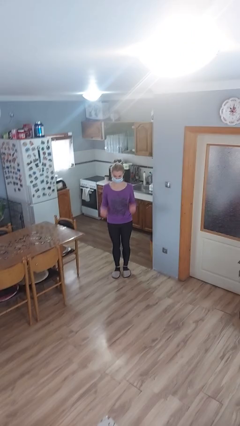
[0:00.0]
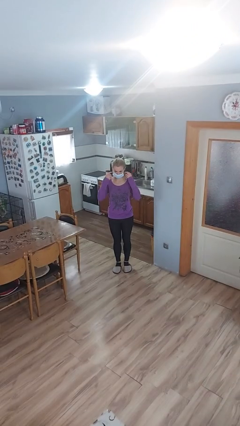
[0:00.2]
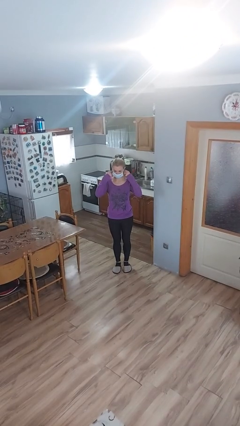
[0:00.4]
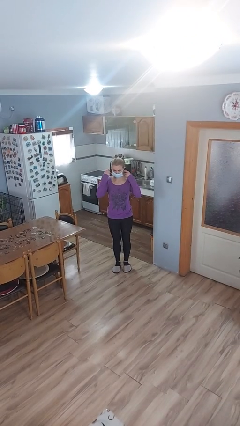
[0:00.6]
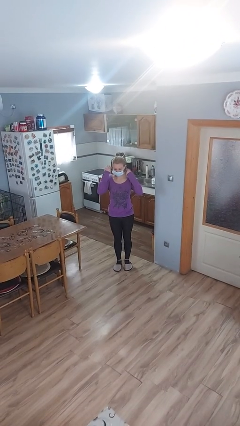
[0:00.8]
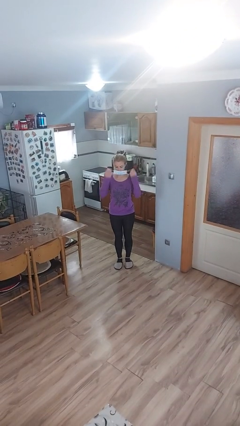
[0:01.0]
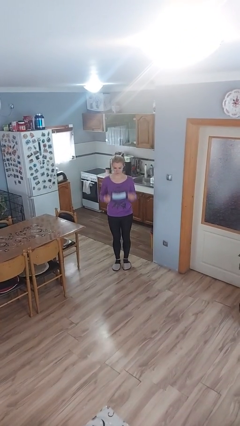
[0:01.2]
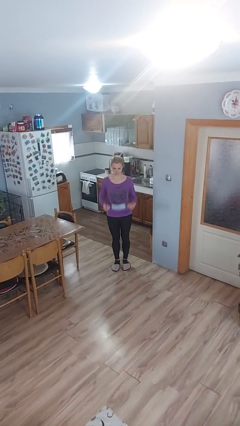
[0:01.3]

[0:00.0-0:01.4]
person takes off facemask

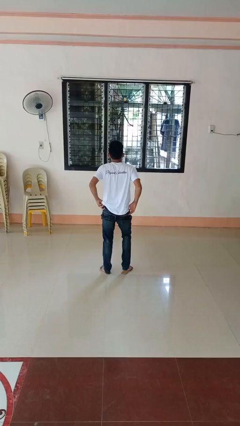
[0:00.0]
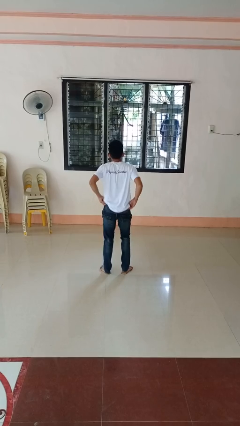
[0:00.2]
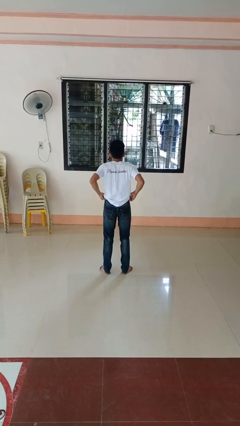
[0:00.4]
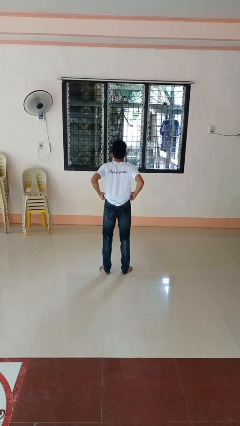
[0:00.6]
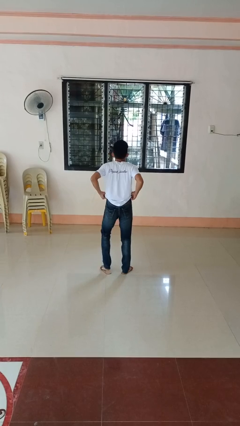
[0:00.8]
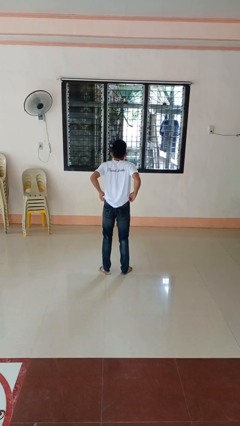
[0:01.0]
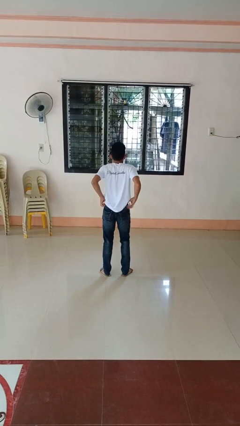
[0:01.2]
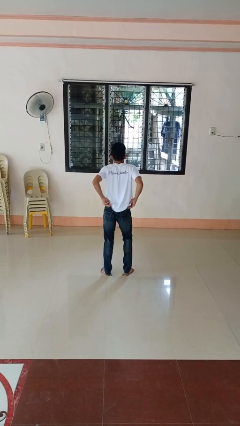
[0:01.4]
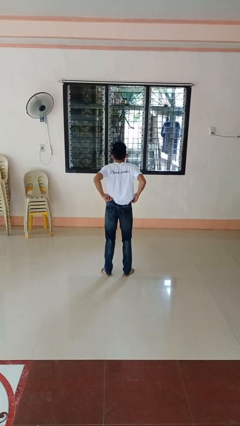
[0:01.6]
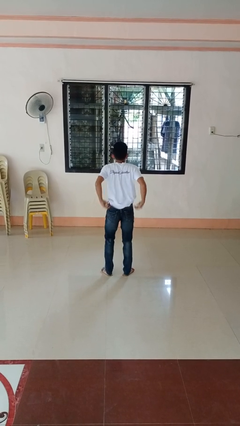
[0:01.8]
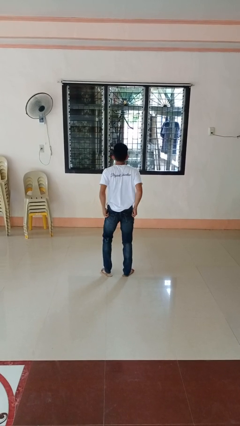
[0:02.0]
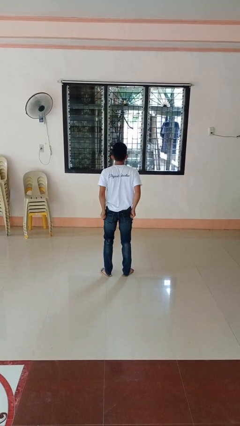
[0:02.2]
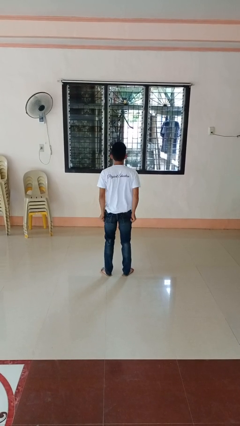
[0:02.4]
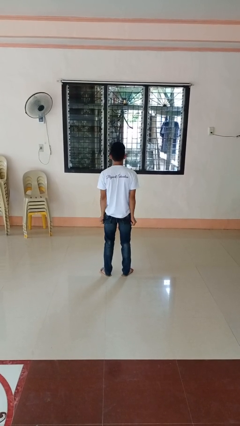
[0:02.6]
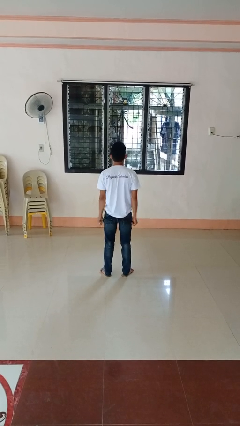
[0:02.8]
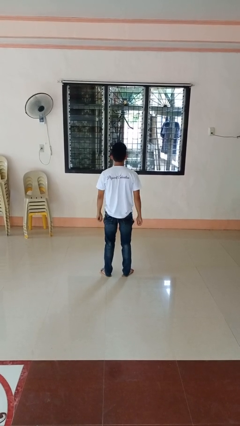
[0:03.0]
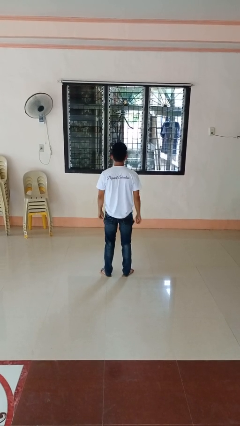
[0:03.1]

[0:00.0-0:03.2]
person hikes up pants

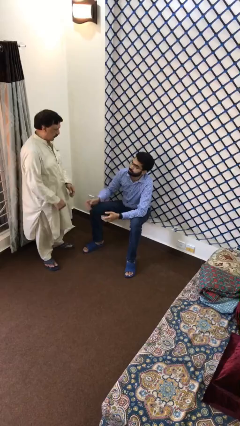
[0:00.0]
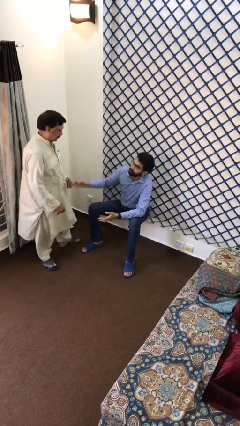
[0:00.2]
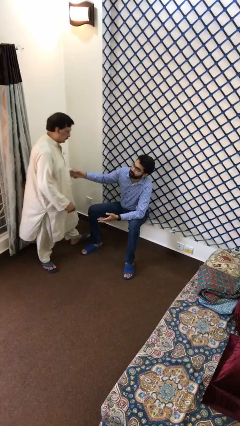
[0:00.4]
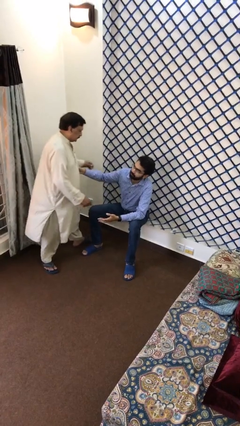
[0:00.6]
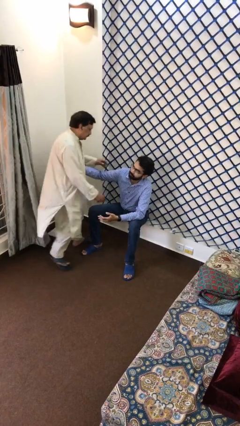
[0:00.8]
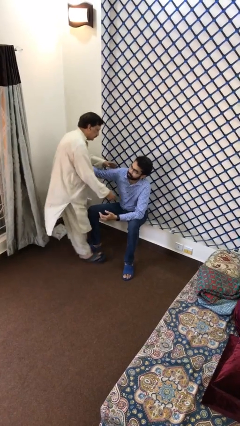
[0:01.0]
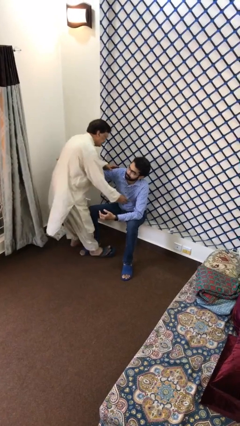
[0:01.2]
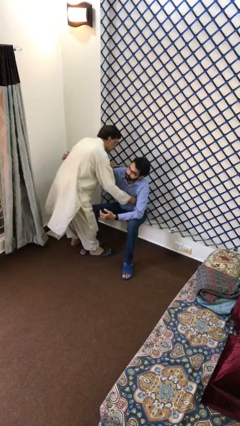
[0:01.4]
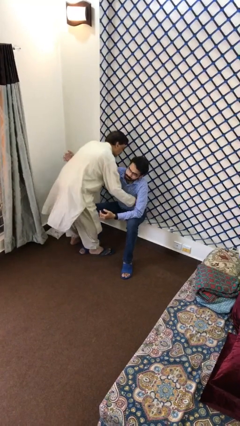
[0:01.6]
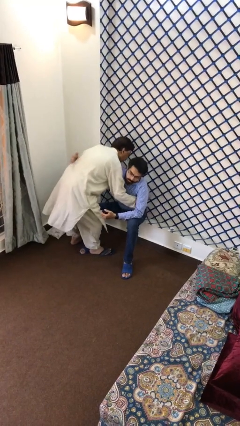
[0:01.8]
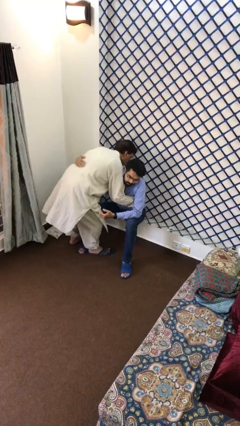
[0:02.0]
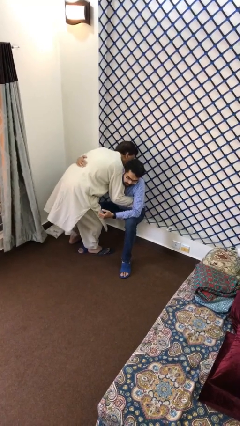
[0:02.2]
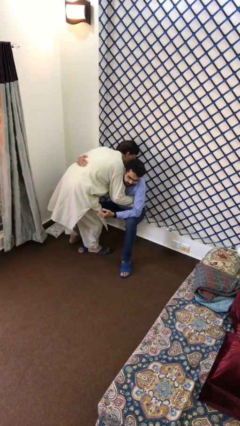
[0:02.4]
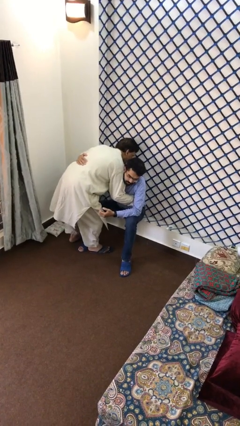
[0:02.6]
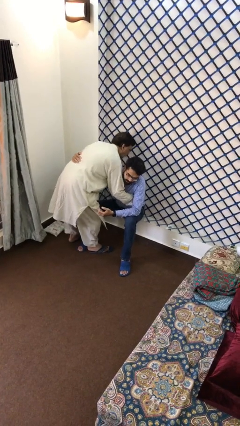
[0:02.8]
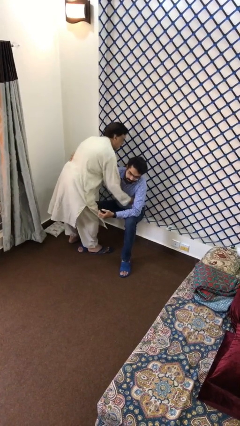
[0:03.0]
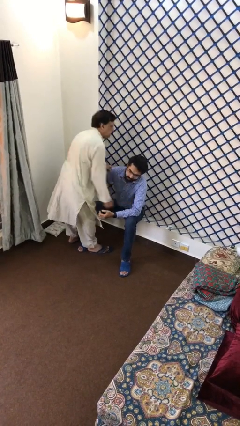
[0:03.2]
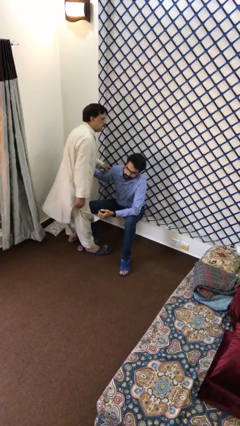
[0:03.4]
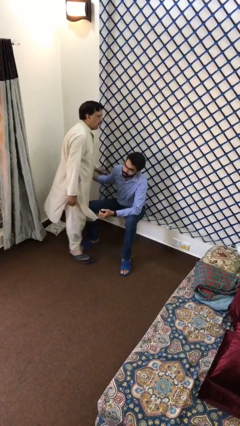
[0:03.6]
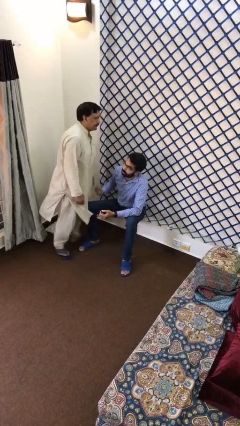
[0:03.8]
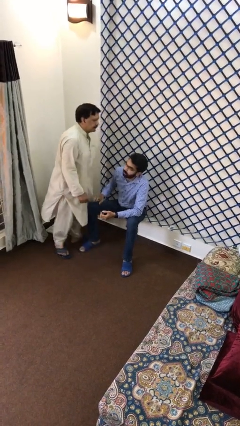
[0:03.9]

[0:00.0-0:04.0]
person embraces person

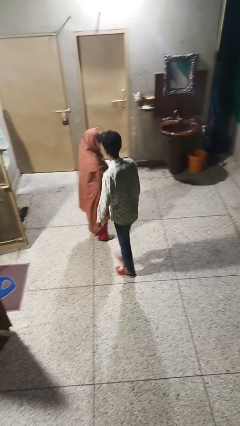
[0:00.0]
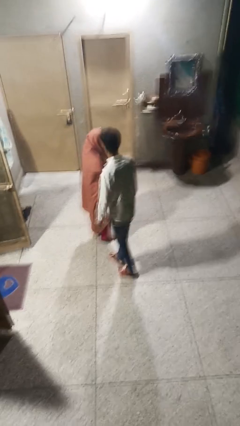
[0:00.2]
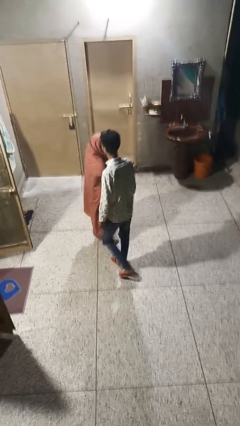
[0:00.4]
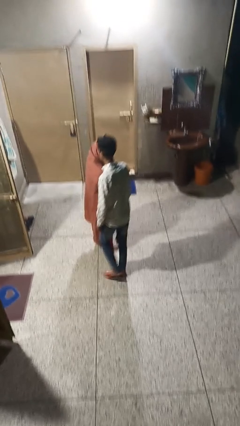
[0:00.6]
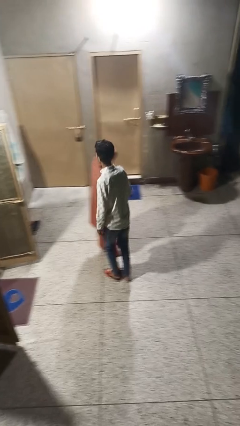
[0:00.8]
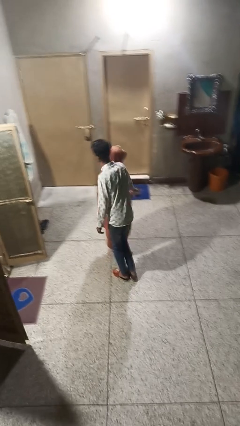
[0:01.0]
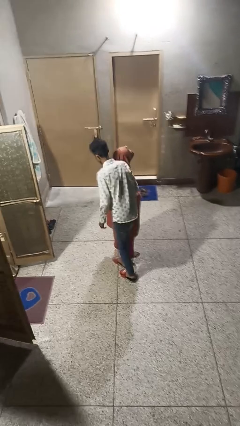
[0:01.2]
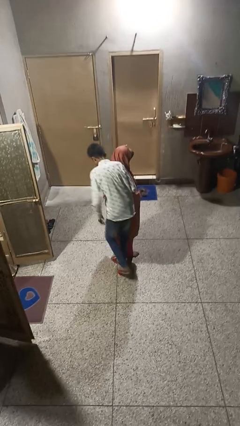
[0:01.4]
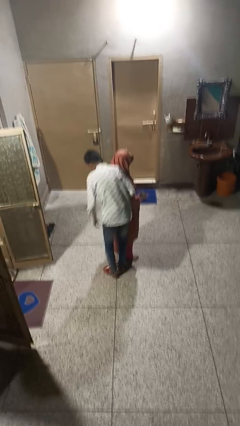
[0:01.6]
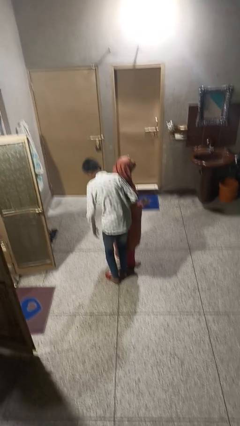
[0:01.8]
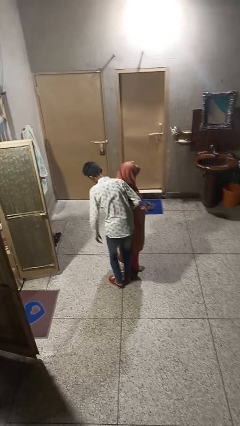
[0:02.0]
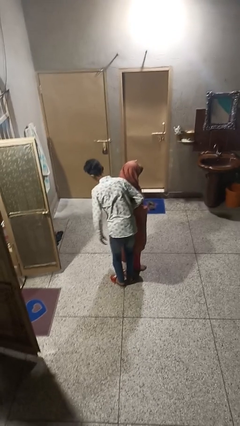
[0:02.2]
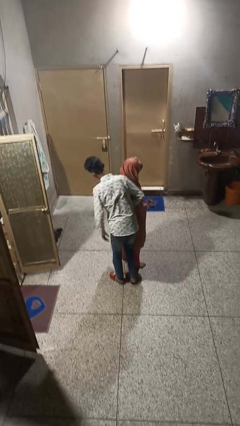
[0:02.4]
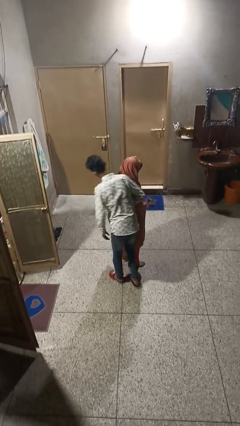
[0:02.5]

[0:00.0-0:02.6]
person bumps into person

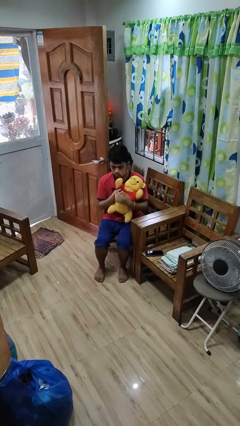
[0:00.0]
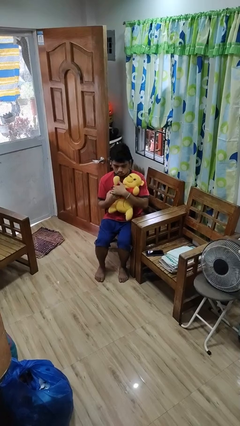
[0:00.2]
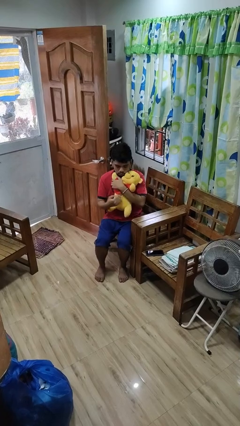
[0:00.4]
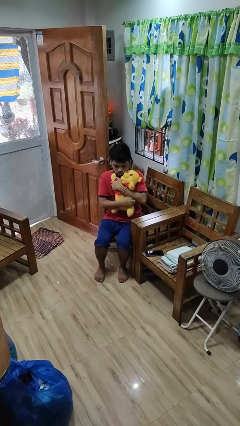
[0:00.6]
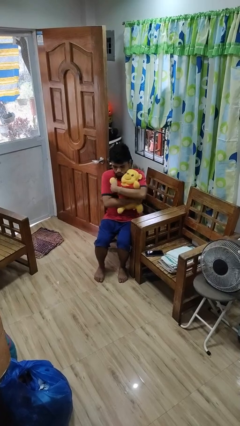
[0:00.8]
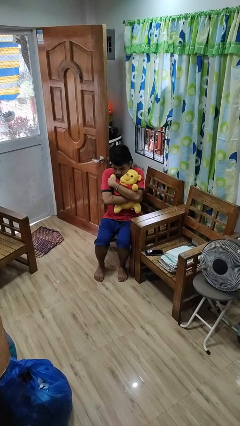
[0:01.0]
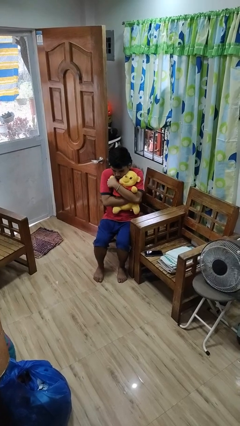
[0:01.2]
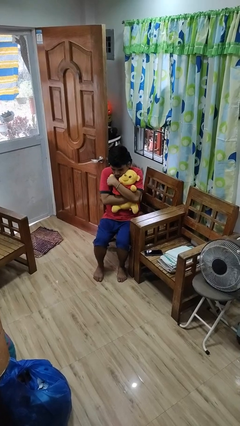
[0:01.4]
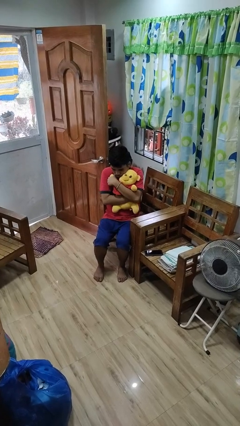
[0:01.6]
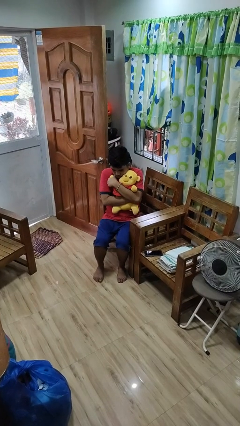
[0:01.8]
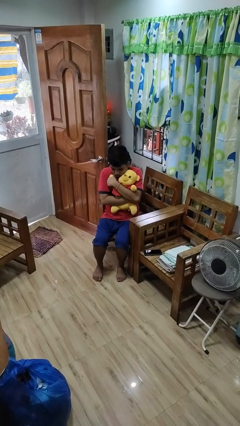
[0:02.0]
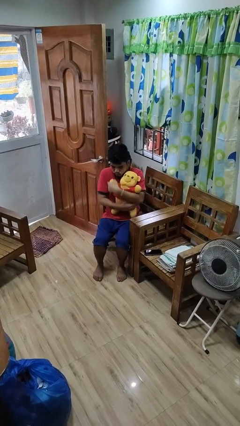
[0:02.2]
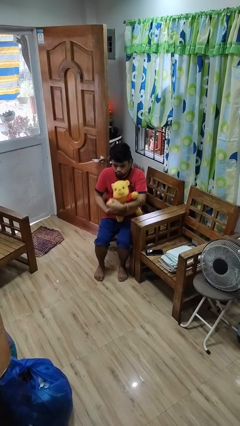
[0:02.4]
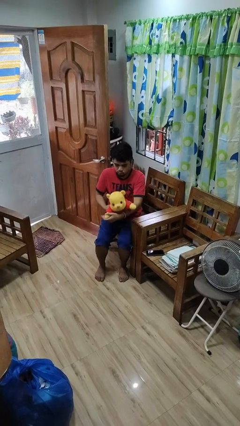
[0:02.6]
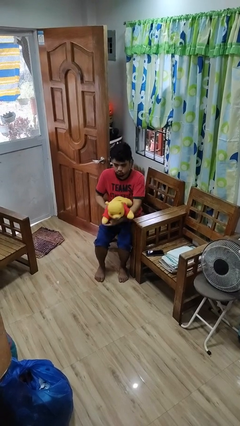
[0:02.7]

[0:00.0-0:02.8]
person hugs stuffed animal

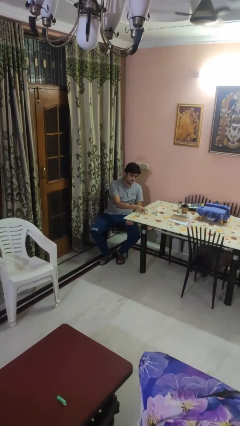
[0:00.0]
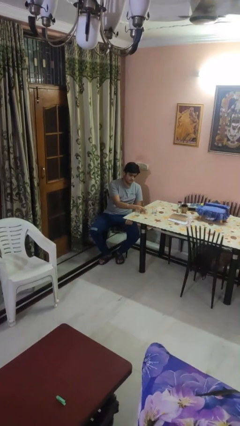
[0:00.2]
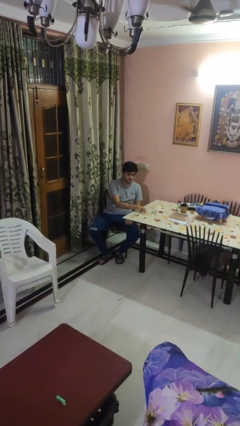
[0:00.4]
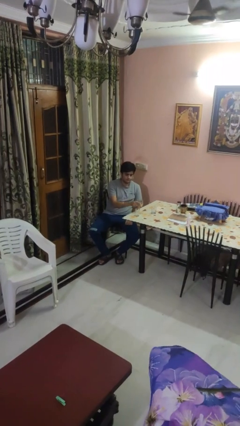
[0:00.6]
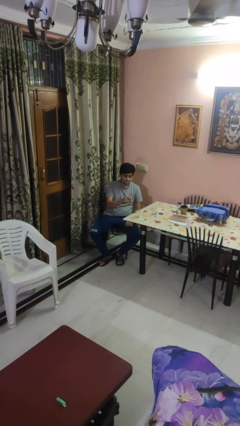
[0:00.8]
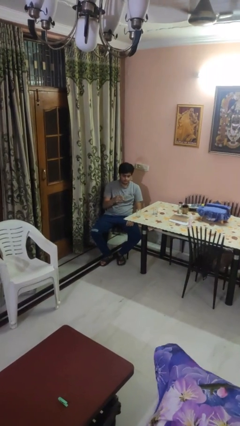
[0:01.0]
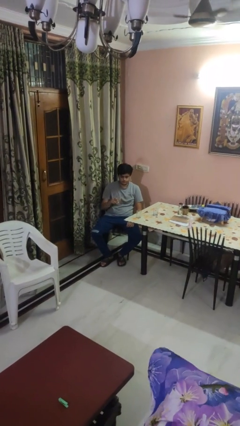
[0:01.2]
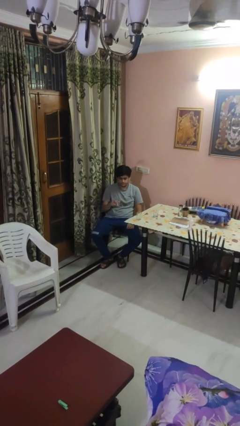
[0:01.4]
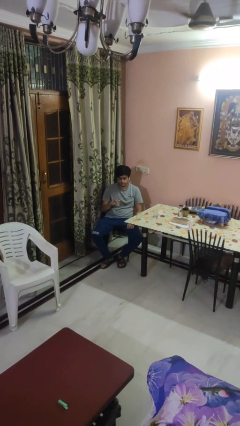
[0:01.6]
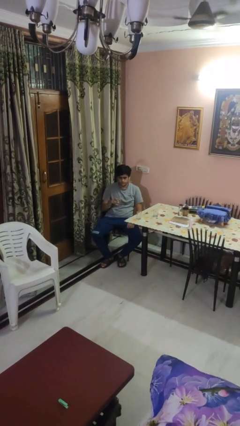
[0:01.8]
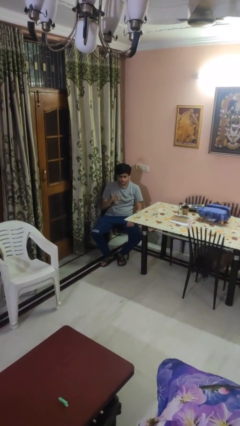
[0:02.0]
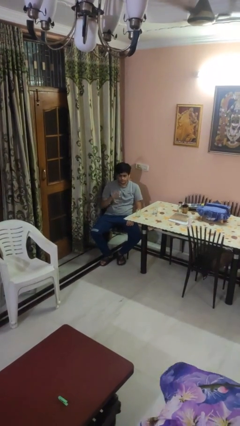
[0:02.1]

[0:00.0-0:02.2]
person picks up object from table

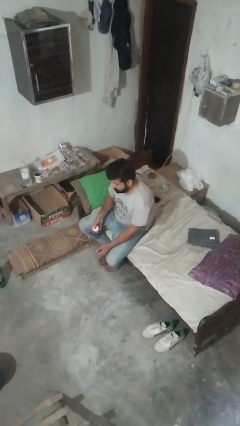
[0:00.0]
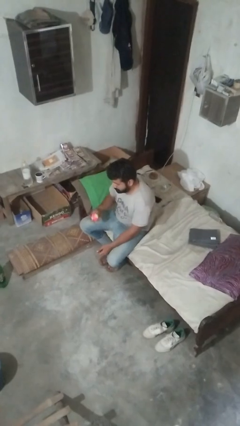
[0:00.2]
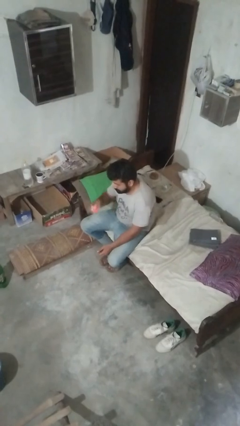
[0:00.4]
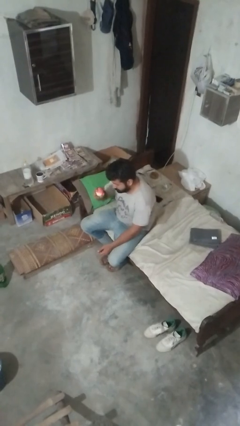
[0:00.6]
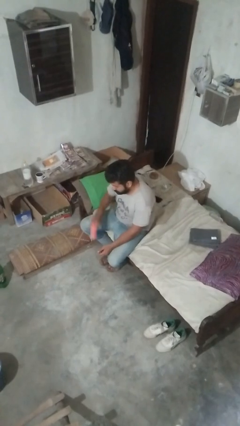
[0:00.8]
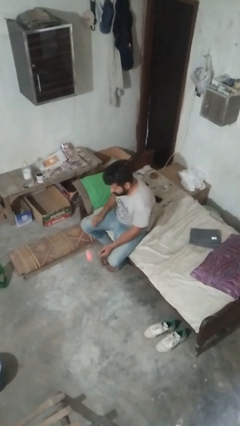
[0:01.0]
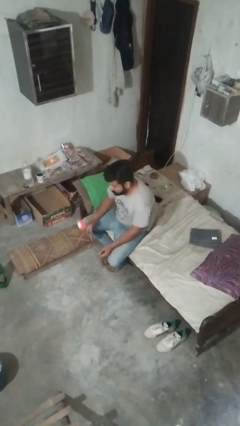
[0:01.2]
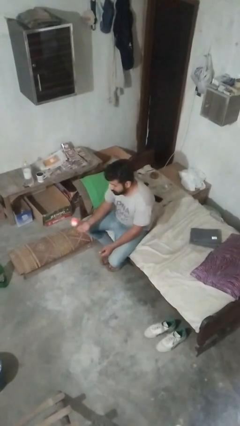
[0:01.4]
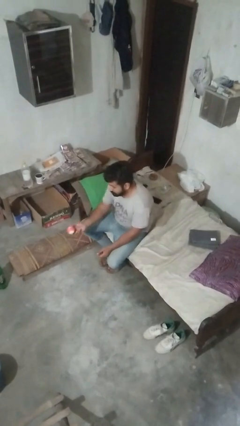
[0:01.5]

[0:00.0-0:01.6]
person bounces ball on floor
